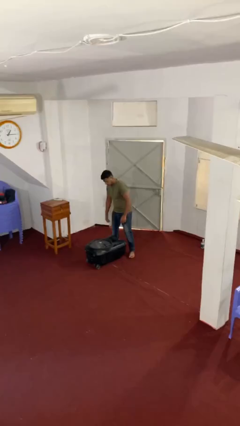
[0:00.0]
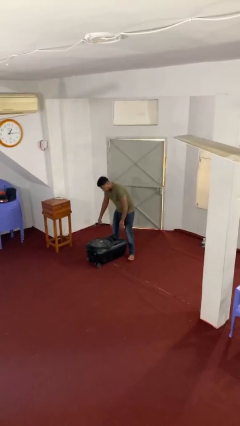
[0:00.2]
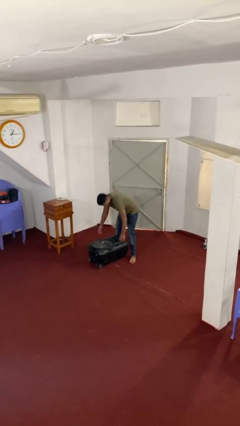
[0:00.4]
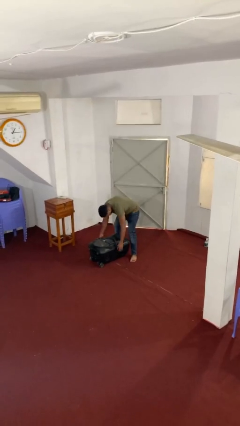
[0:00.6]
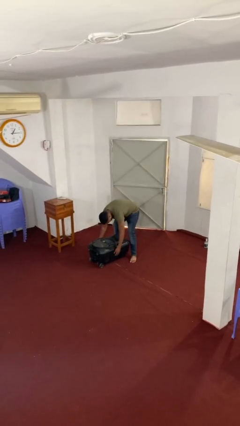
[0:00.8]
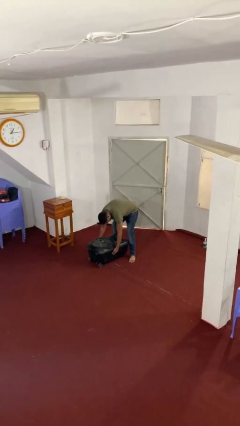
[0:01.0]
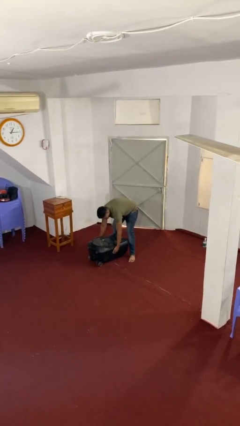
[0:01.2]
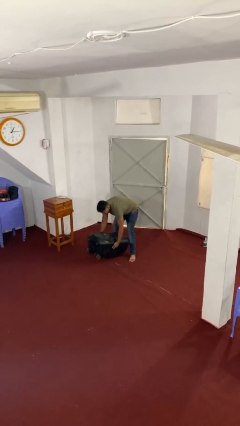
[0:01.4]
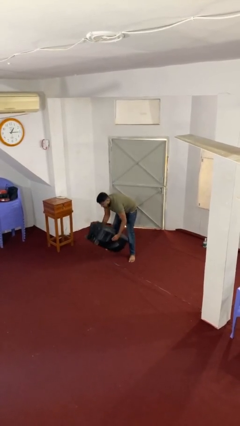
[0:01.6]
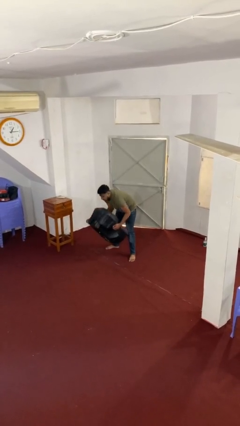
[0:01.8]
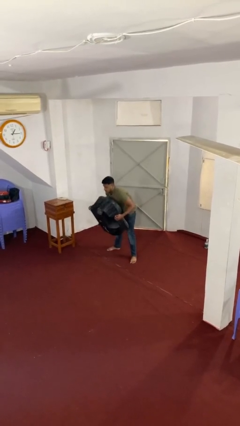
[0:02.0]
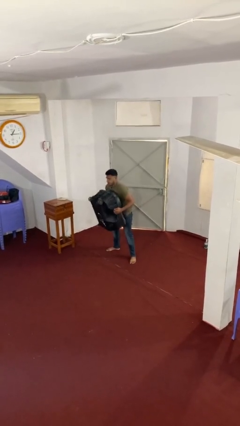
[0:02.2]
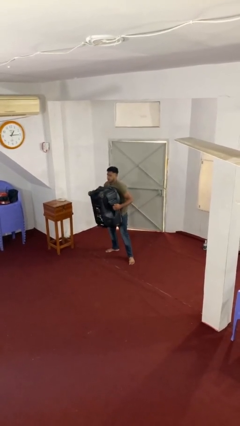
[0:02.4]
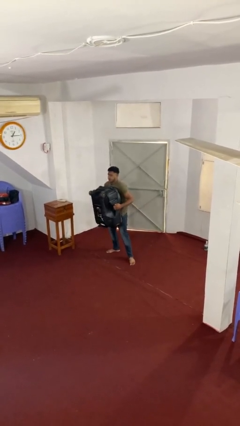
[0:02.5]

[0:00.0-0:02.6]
person picks up object from floor

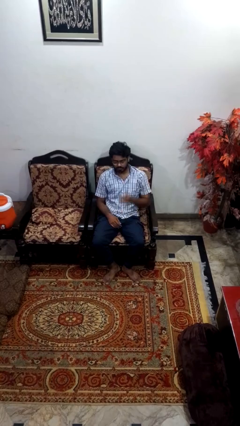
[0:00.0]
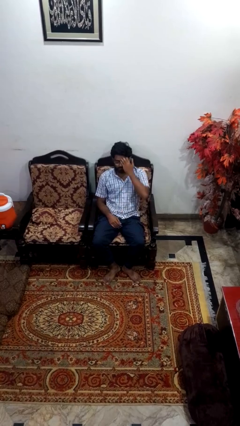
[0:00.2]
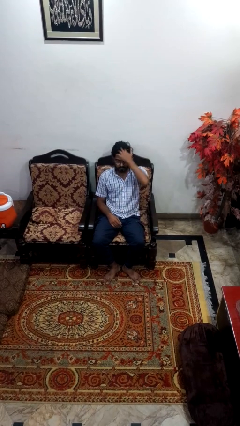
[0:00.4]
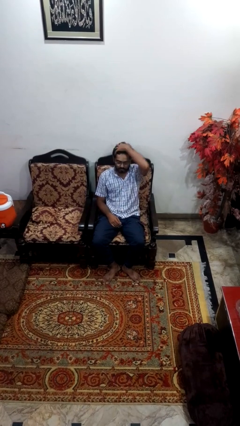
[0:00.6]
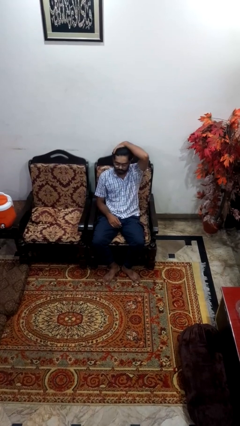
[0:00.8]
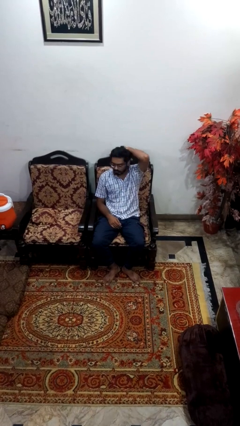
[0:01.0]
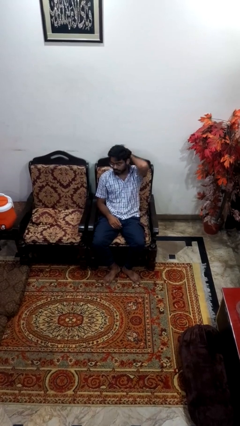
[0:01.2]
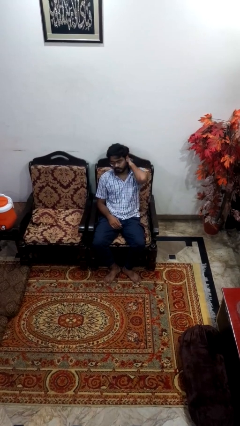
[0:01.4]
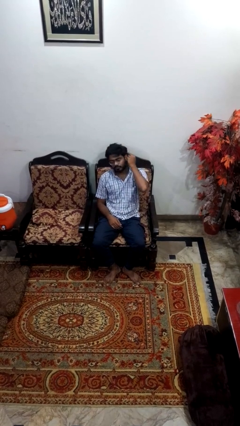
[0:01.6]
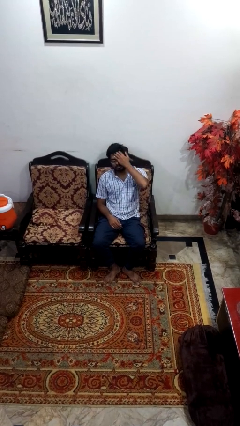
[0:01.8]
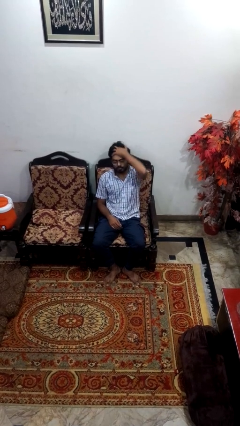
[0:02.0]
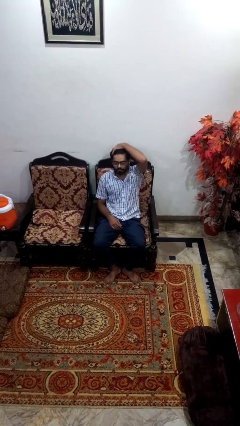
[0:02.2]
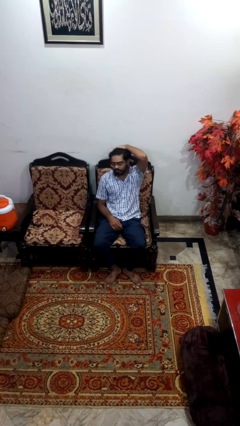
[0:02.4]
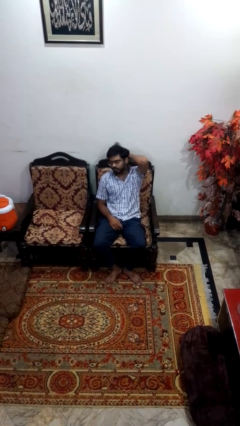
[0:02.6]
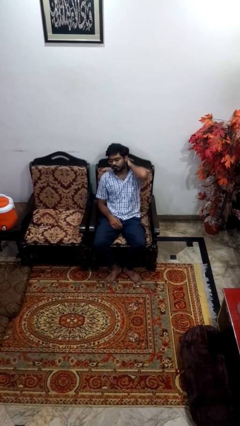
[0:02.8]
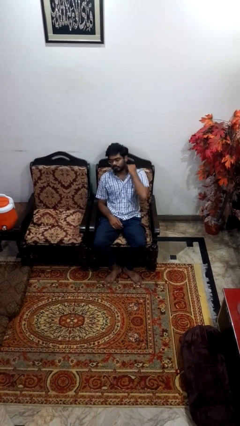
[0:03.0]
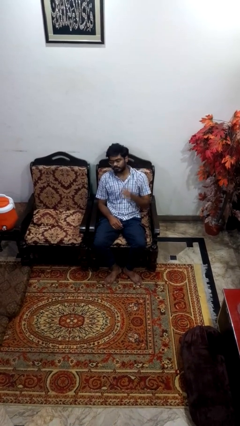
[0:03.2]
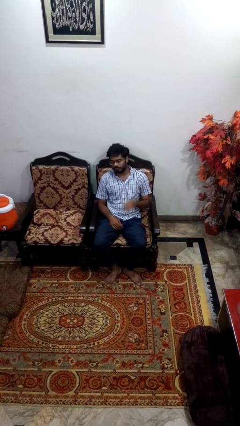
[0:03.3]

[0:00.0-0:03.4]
person strokes hair

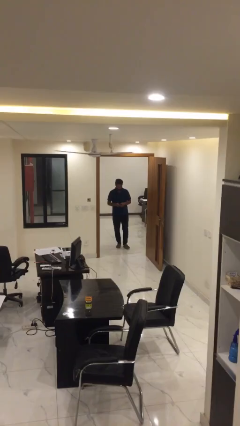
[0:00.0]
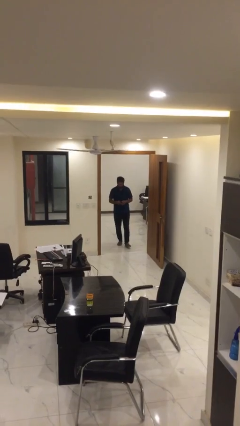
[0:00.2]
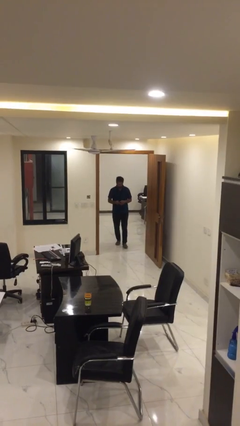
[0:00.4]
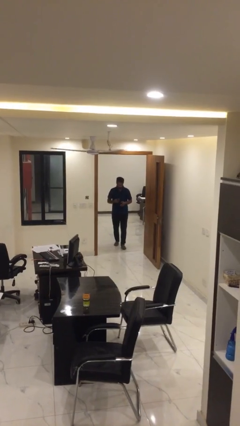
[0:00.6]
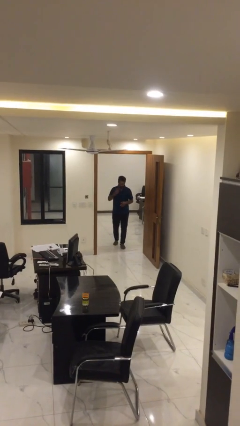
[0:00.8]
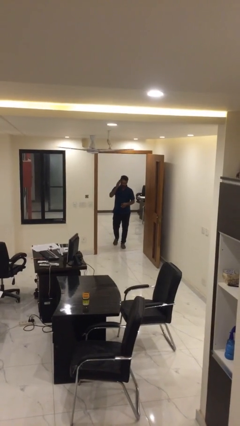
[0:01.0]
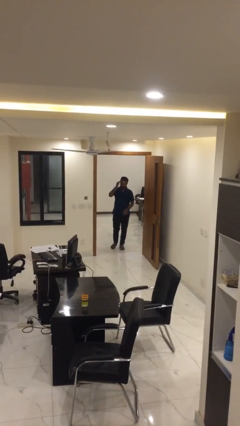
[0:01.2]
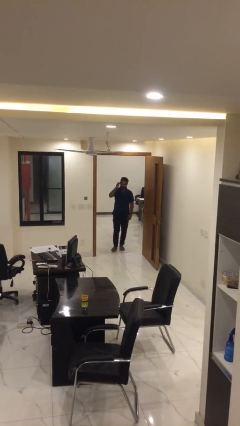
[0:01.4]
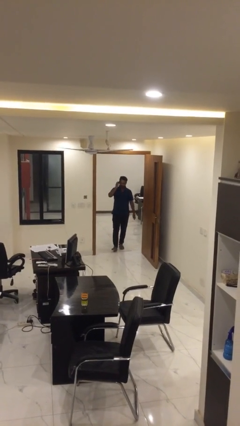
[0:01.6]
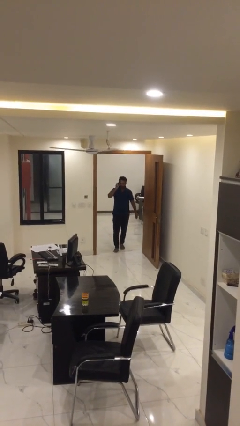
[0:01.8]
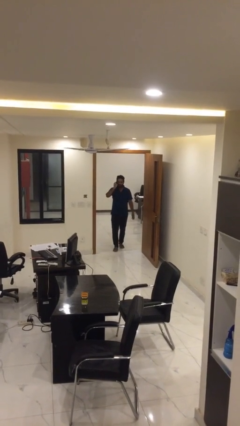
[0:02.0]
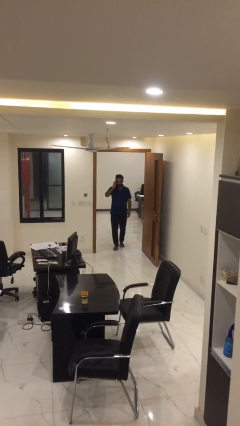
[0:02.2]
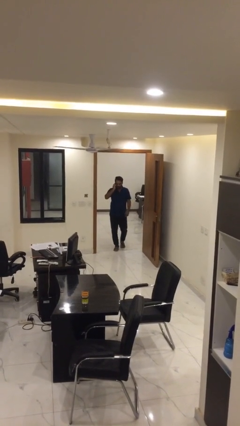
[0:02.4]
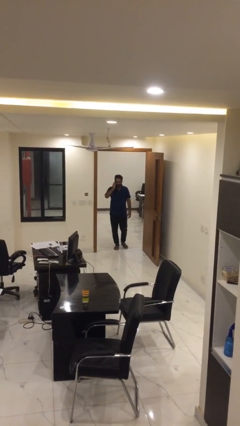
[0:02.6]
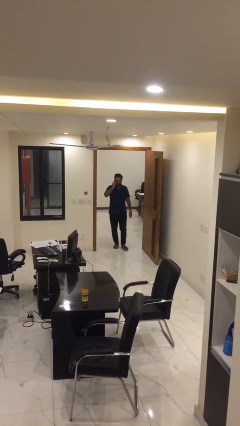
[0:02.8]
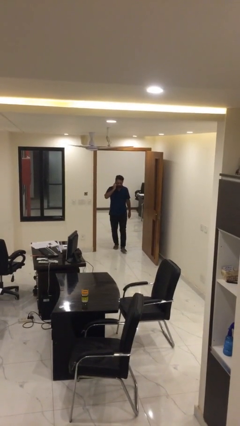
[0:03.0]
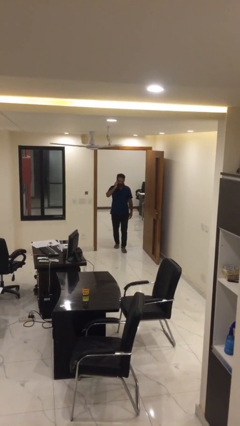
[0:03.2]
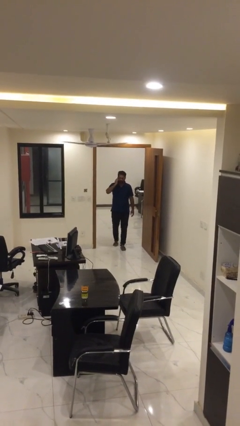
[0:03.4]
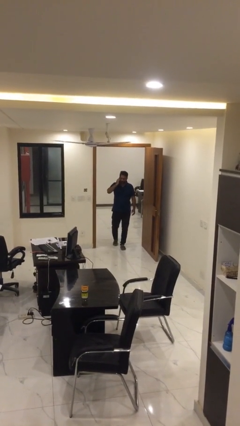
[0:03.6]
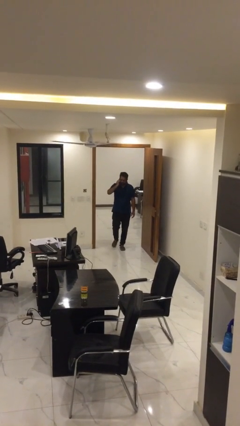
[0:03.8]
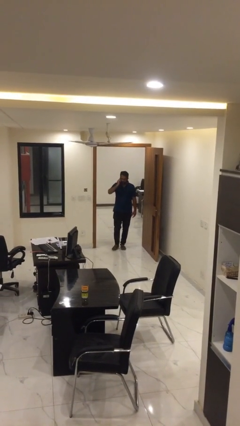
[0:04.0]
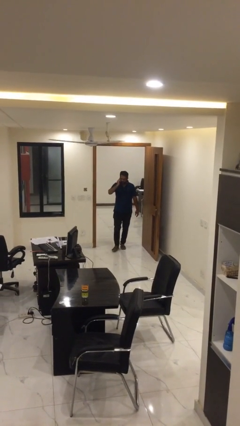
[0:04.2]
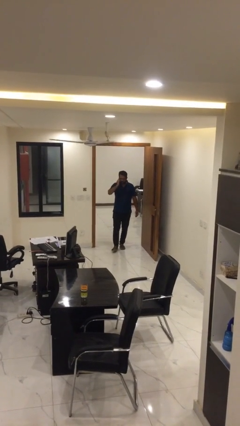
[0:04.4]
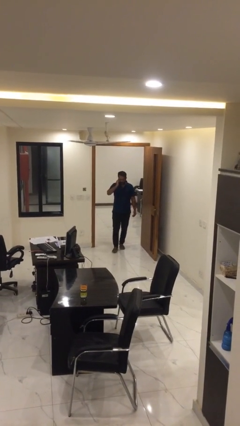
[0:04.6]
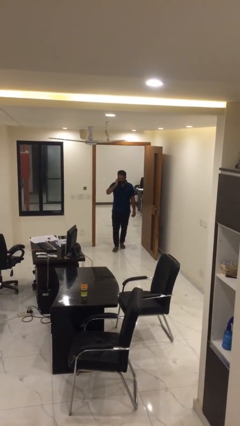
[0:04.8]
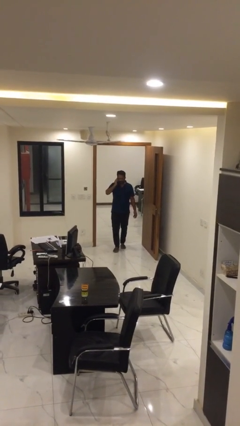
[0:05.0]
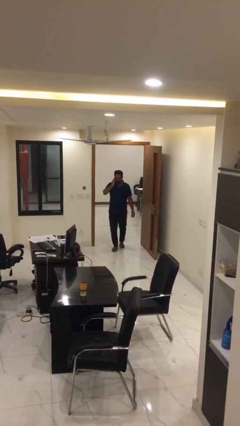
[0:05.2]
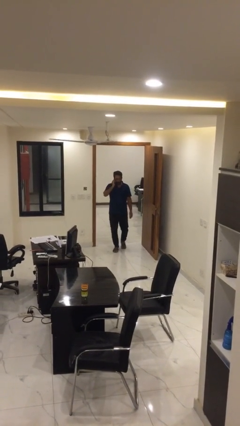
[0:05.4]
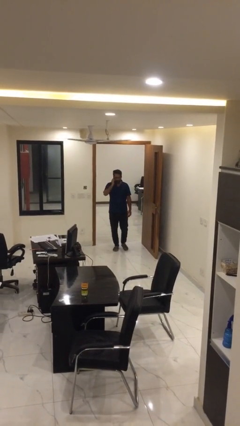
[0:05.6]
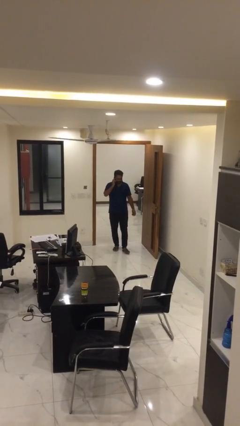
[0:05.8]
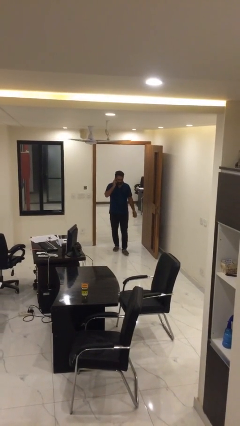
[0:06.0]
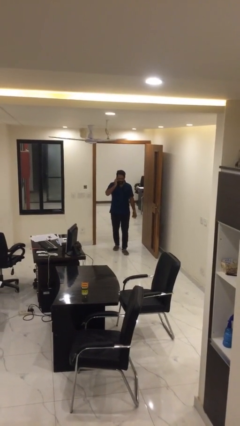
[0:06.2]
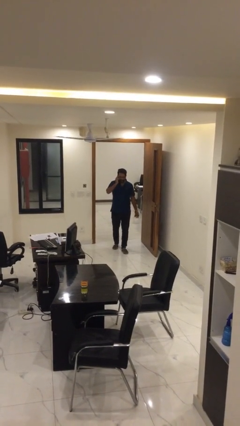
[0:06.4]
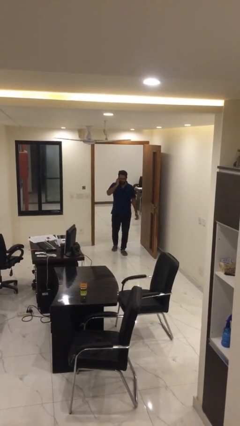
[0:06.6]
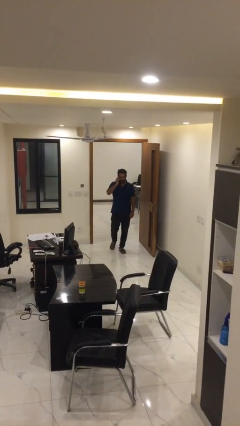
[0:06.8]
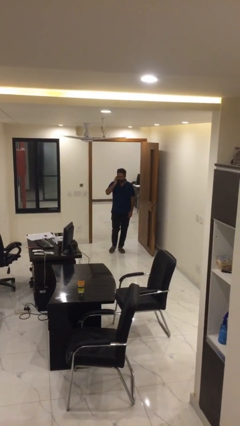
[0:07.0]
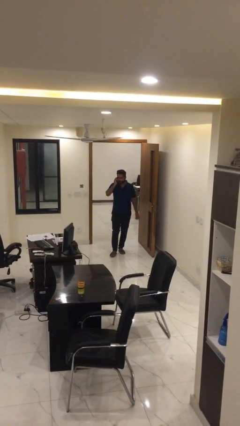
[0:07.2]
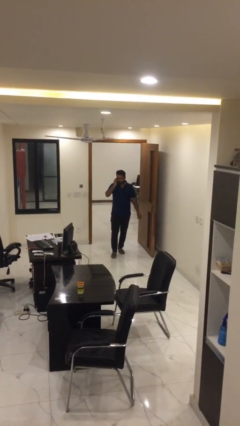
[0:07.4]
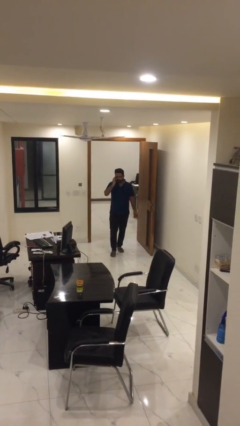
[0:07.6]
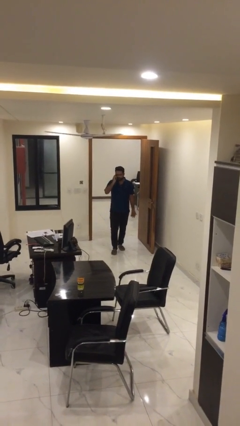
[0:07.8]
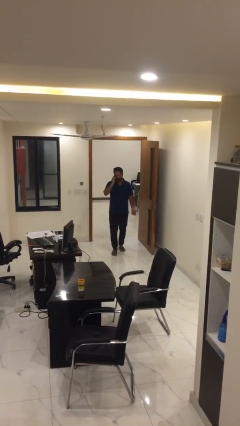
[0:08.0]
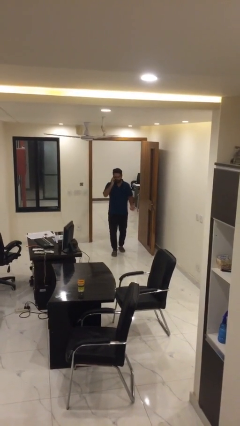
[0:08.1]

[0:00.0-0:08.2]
person talks on phone

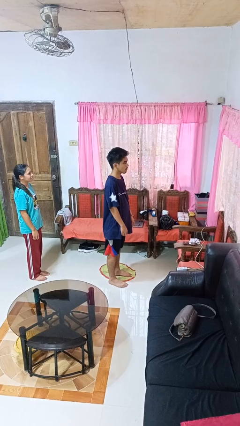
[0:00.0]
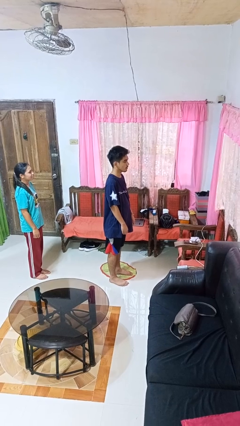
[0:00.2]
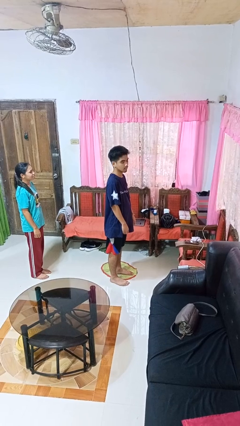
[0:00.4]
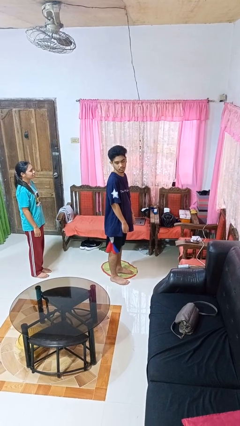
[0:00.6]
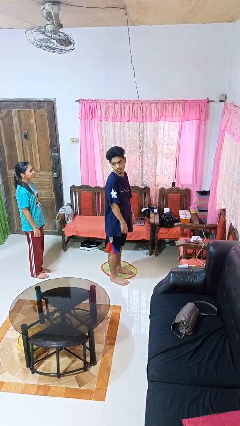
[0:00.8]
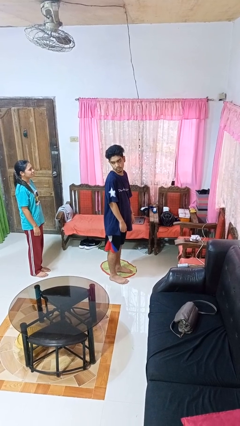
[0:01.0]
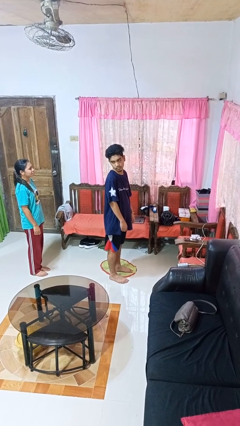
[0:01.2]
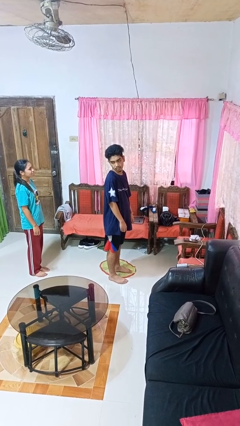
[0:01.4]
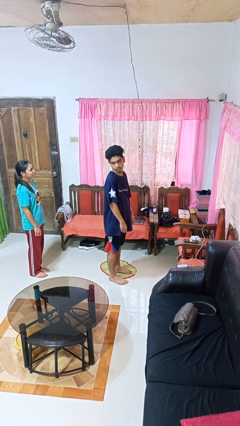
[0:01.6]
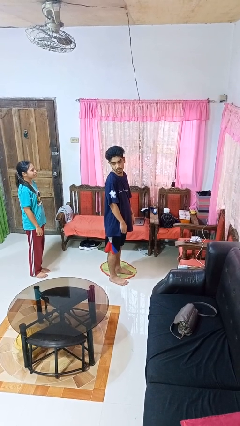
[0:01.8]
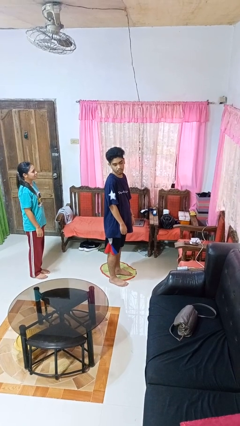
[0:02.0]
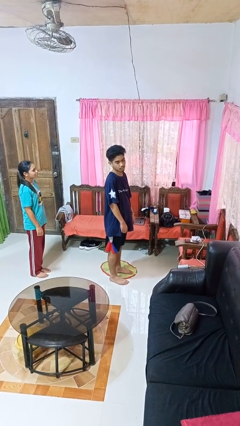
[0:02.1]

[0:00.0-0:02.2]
person looks over shoulder

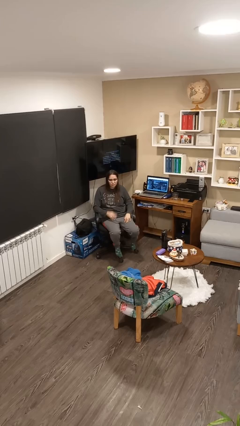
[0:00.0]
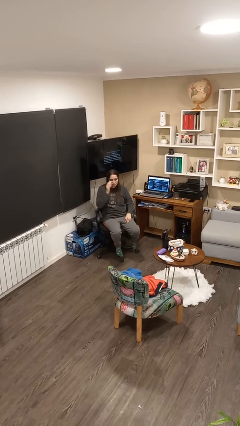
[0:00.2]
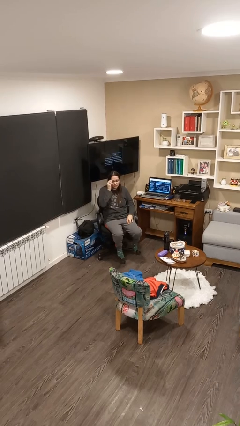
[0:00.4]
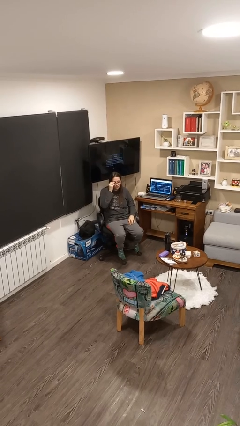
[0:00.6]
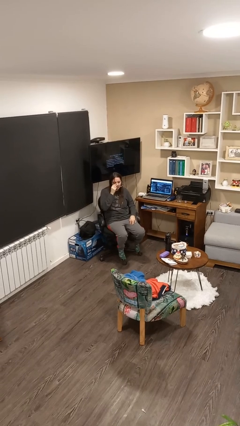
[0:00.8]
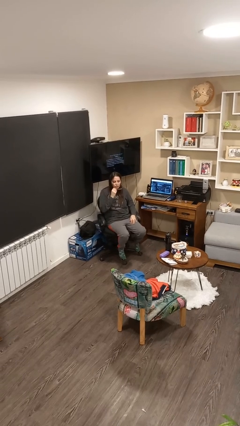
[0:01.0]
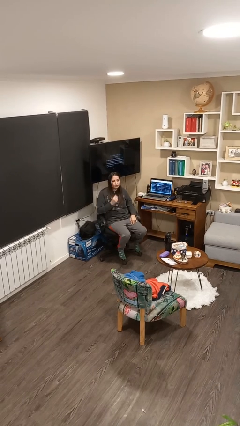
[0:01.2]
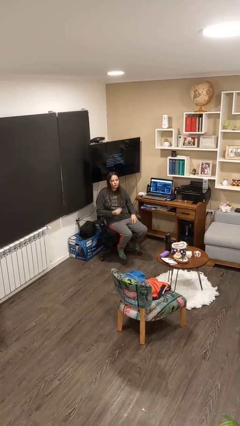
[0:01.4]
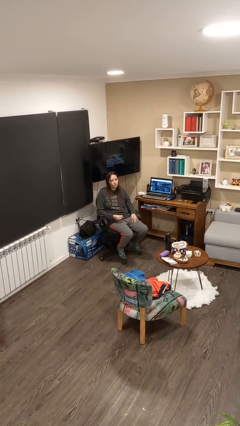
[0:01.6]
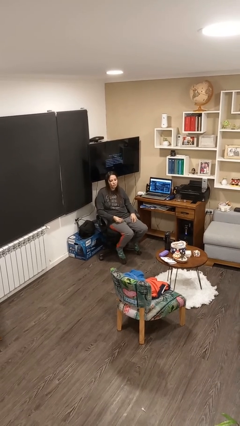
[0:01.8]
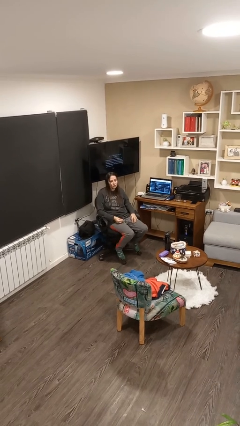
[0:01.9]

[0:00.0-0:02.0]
person takes off glasses
